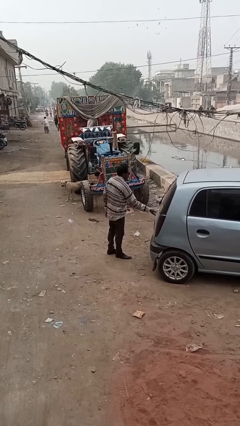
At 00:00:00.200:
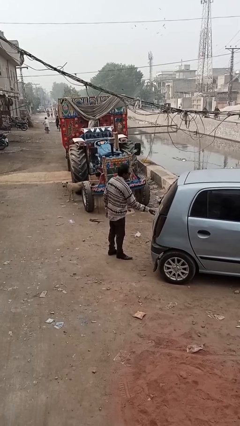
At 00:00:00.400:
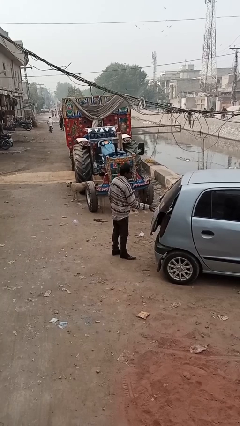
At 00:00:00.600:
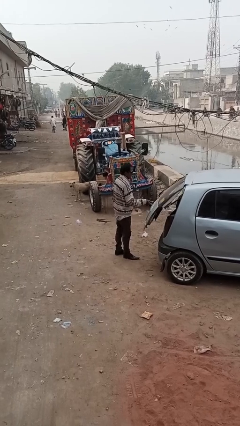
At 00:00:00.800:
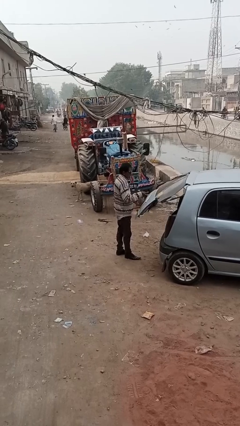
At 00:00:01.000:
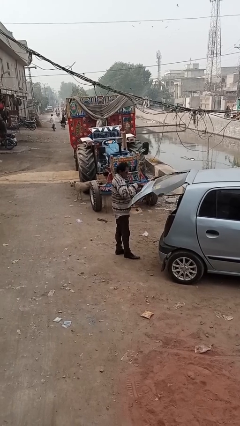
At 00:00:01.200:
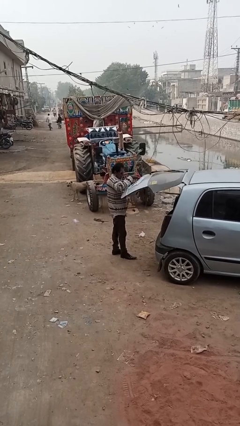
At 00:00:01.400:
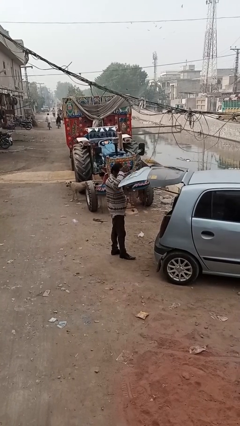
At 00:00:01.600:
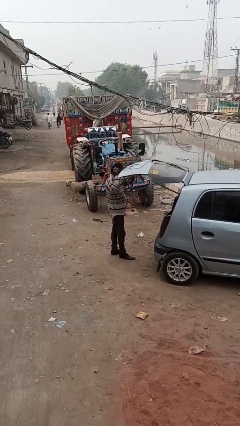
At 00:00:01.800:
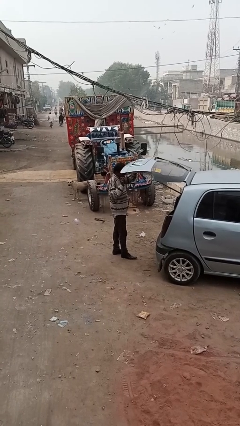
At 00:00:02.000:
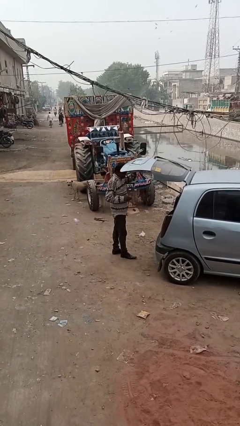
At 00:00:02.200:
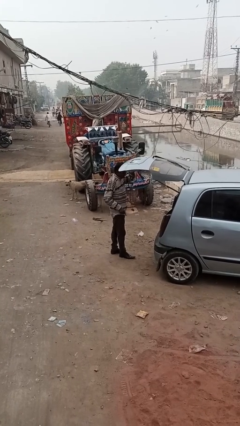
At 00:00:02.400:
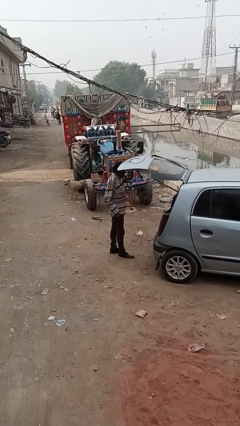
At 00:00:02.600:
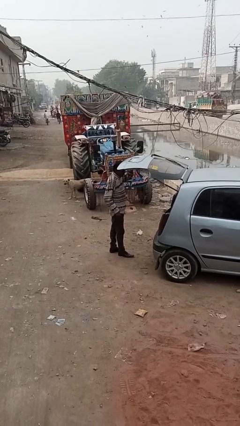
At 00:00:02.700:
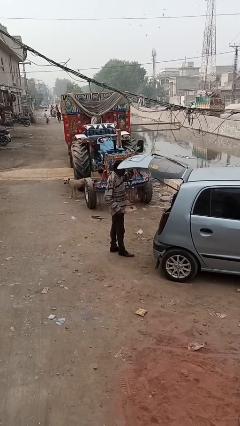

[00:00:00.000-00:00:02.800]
person opens car trunk

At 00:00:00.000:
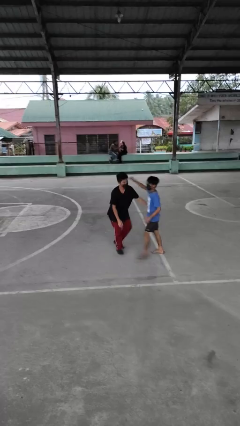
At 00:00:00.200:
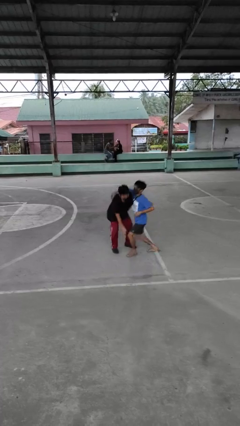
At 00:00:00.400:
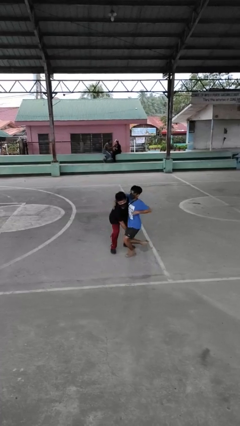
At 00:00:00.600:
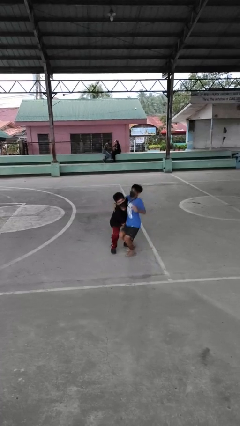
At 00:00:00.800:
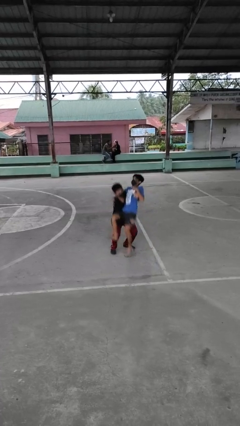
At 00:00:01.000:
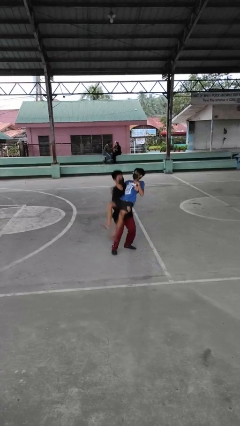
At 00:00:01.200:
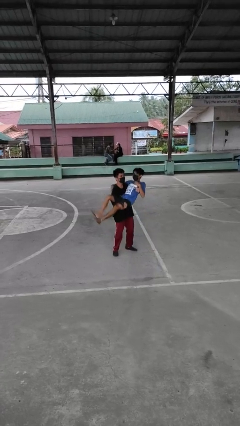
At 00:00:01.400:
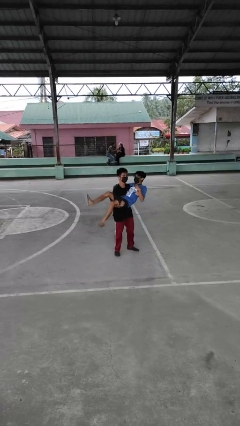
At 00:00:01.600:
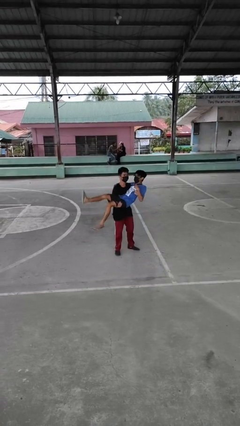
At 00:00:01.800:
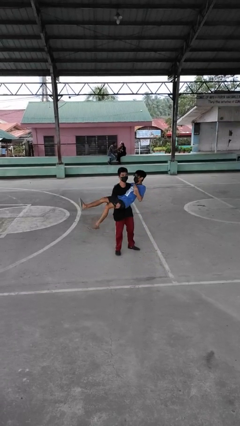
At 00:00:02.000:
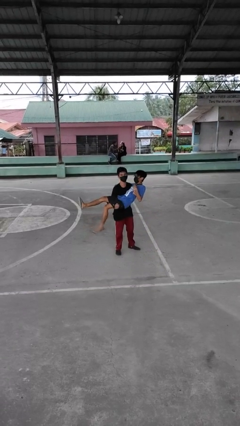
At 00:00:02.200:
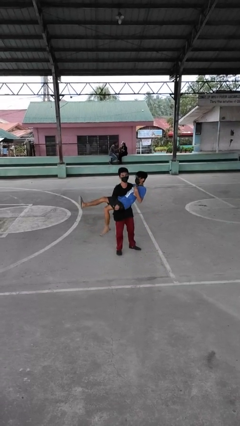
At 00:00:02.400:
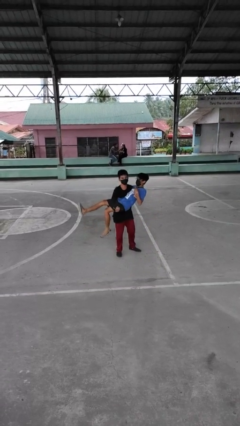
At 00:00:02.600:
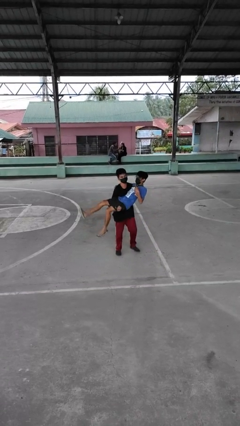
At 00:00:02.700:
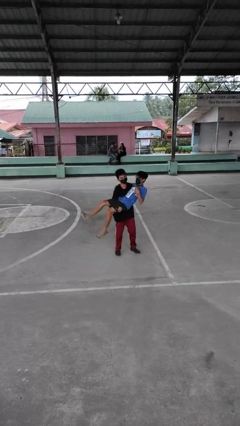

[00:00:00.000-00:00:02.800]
person picks up person

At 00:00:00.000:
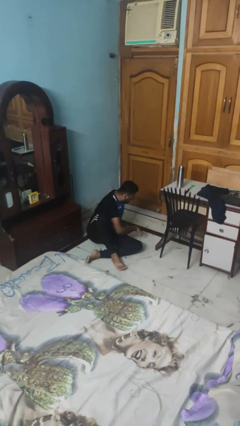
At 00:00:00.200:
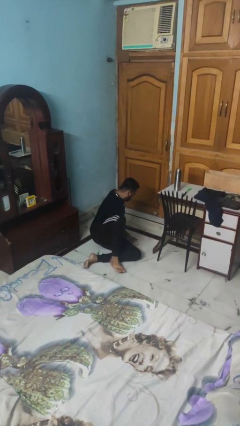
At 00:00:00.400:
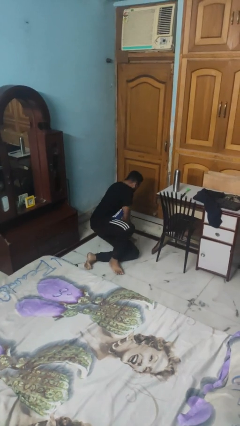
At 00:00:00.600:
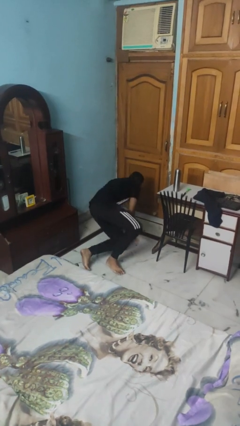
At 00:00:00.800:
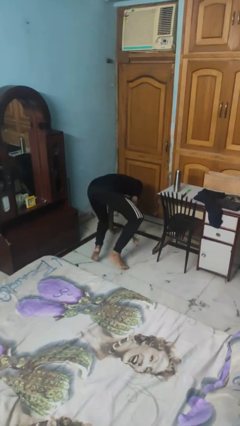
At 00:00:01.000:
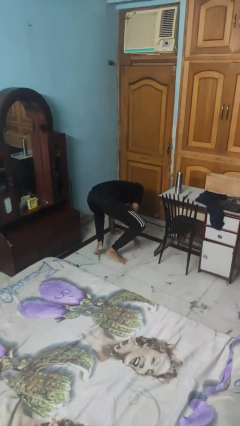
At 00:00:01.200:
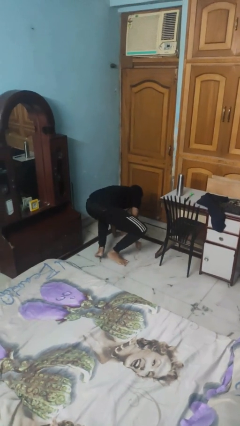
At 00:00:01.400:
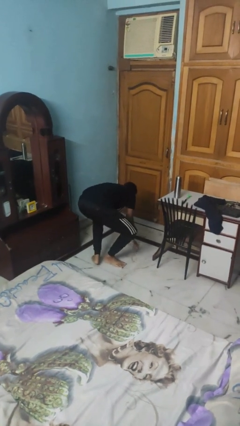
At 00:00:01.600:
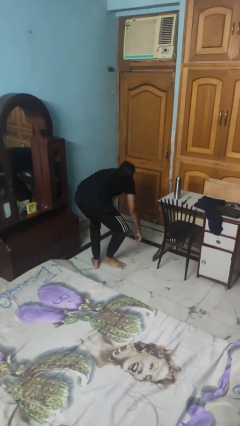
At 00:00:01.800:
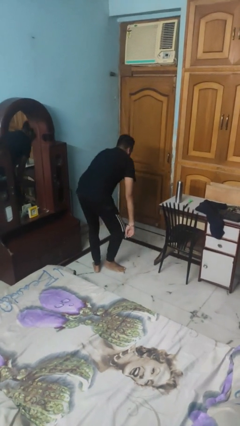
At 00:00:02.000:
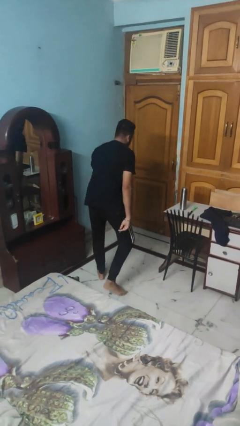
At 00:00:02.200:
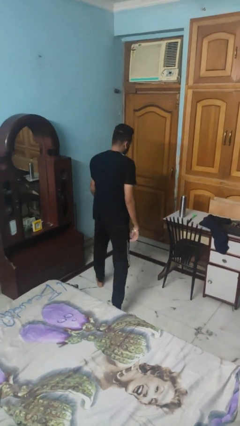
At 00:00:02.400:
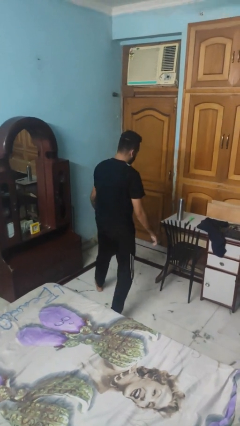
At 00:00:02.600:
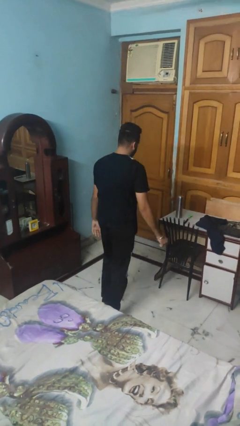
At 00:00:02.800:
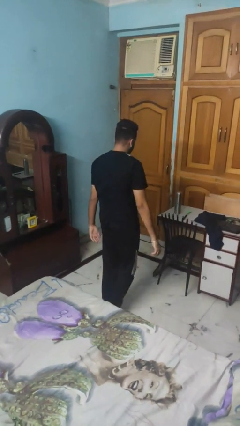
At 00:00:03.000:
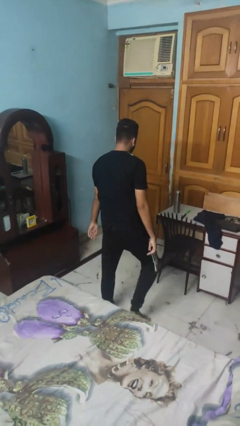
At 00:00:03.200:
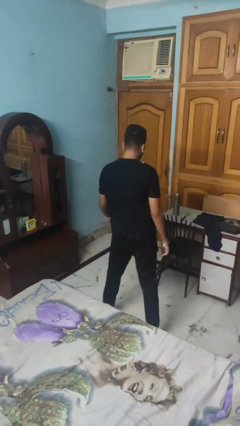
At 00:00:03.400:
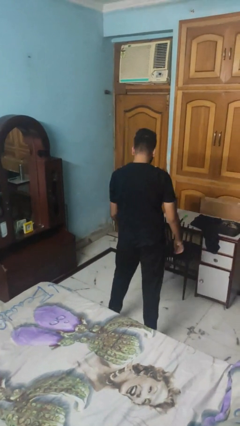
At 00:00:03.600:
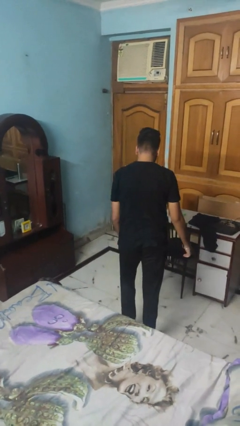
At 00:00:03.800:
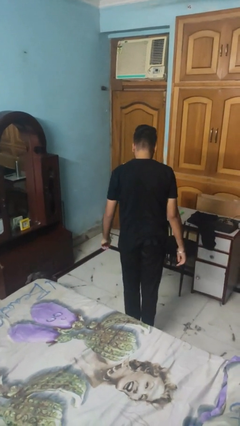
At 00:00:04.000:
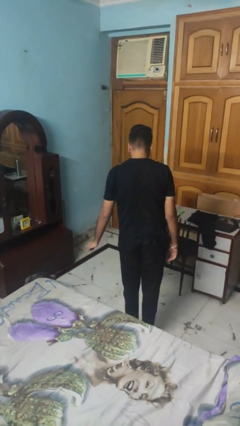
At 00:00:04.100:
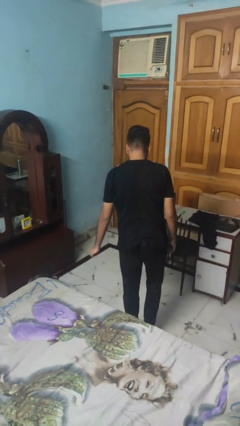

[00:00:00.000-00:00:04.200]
person stands up from floor

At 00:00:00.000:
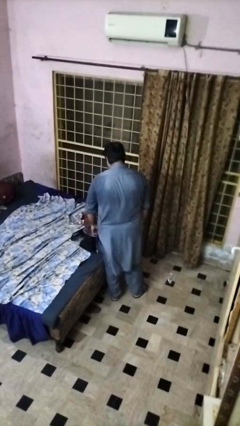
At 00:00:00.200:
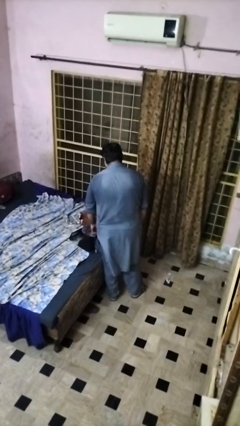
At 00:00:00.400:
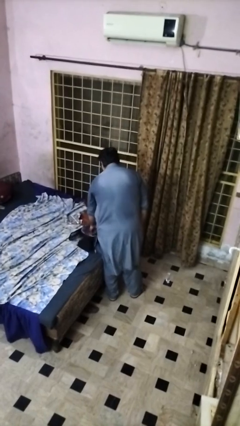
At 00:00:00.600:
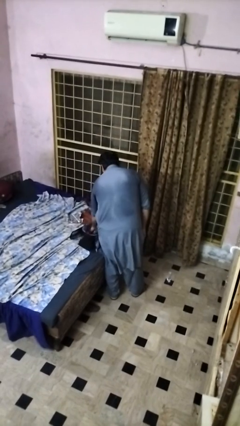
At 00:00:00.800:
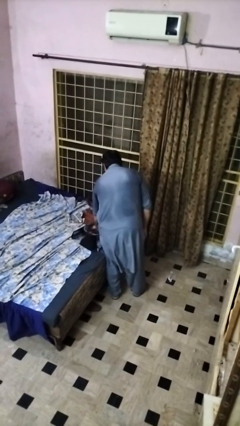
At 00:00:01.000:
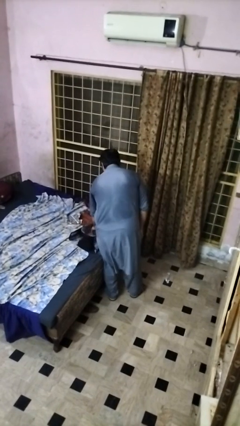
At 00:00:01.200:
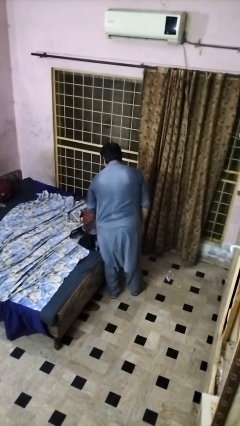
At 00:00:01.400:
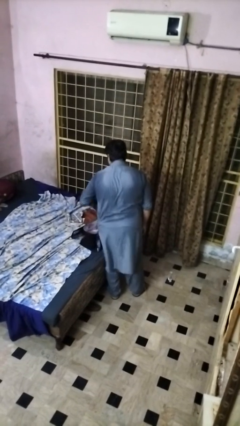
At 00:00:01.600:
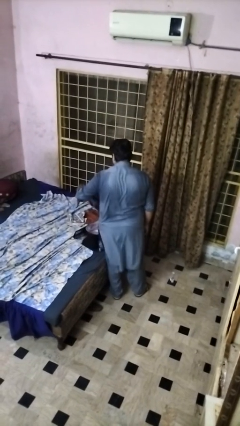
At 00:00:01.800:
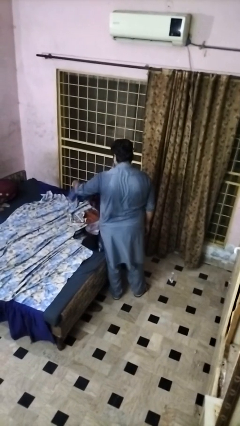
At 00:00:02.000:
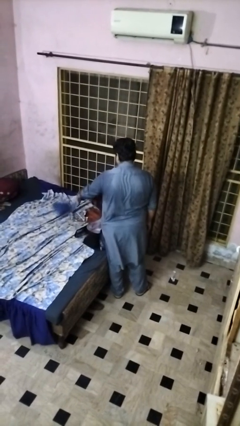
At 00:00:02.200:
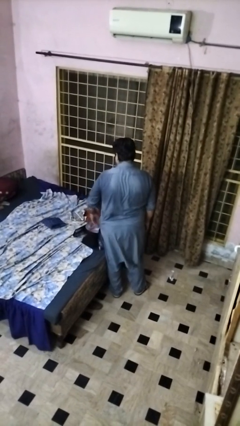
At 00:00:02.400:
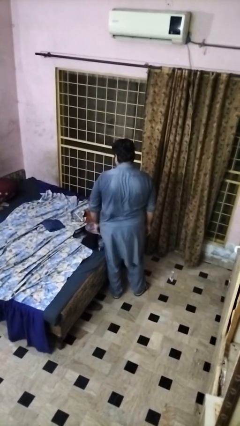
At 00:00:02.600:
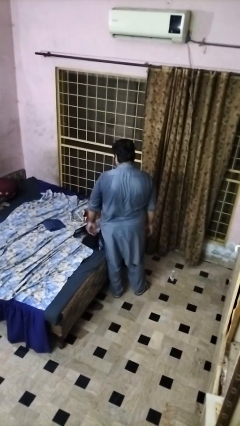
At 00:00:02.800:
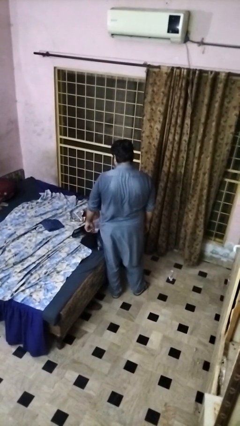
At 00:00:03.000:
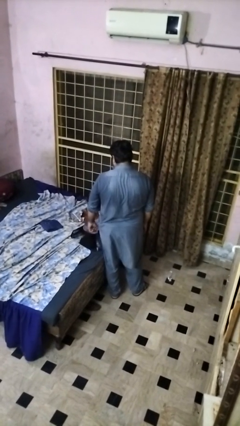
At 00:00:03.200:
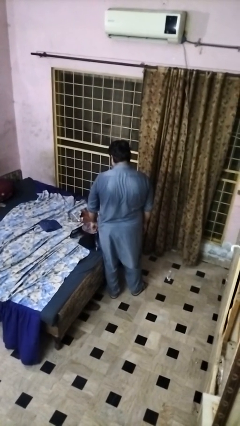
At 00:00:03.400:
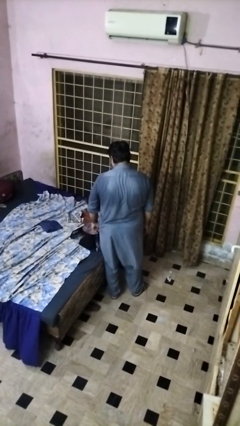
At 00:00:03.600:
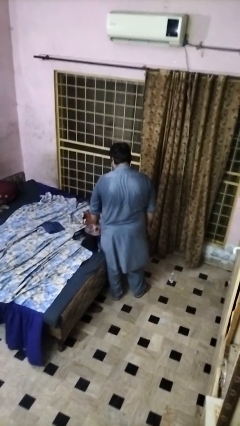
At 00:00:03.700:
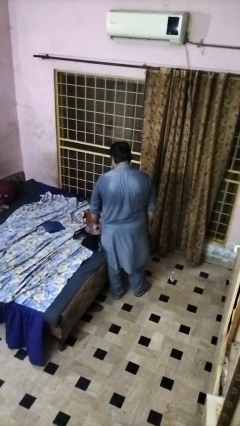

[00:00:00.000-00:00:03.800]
person unloads clothes from suitcase

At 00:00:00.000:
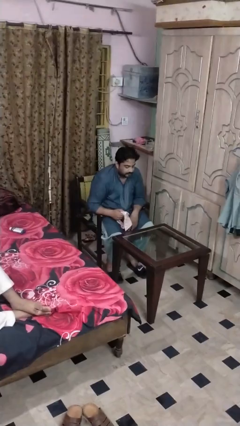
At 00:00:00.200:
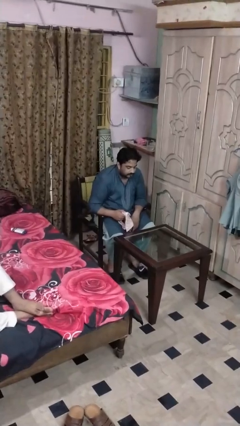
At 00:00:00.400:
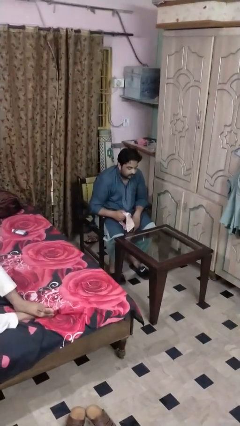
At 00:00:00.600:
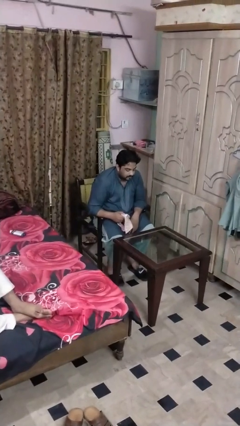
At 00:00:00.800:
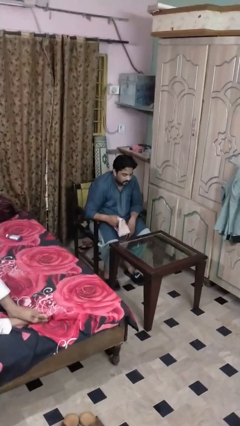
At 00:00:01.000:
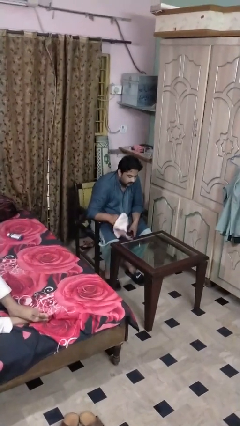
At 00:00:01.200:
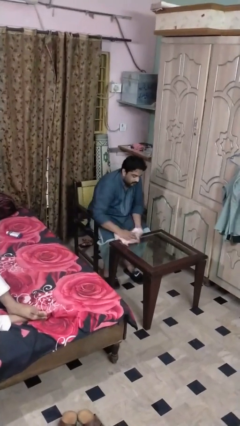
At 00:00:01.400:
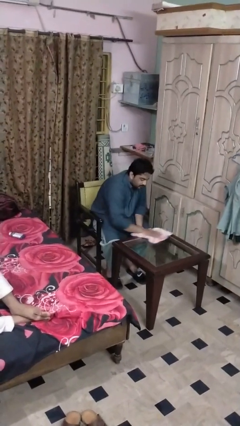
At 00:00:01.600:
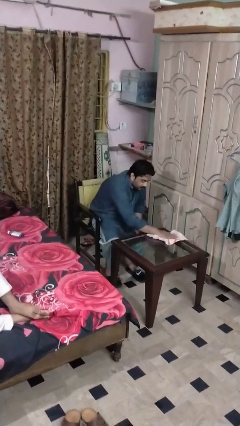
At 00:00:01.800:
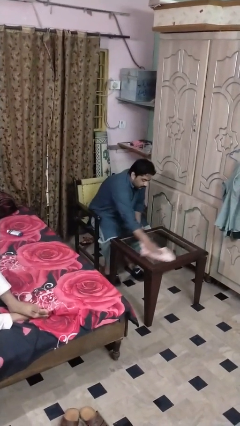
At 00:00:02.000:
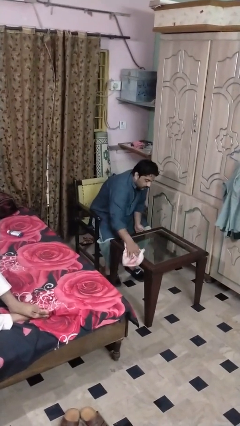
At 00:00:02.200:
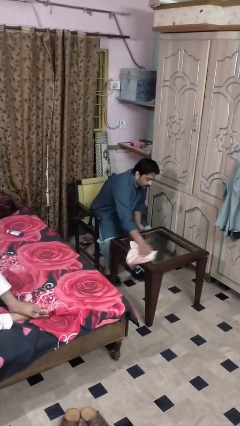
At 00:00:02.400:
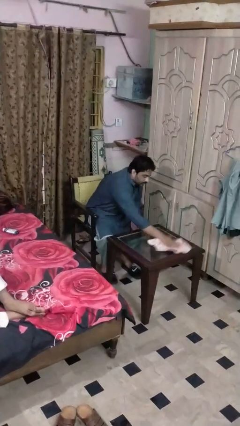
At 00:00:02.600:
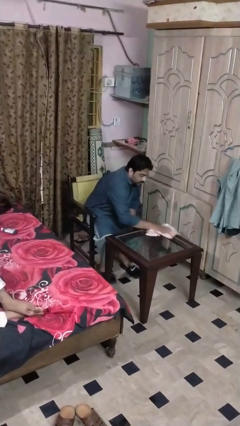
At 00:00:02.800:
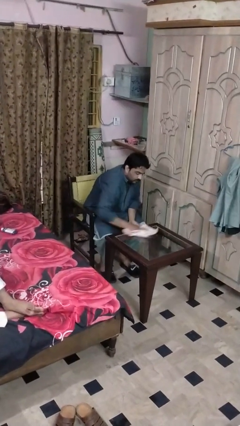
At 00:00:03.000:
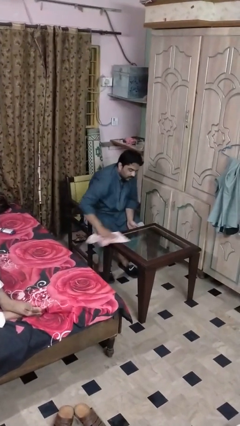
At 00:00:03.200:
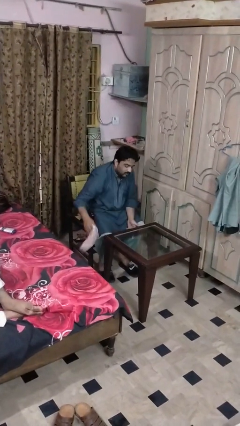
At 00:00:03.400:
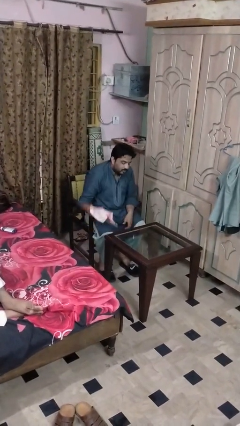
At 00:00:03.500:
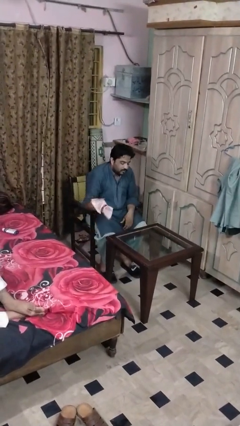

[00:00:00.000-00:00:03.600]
person cleans table with rag

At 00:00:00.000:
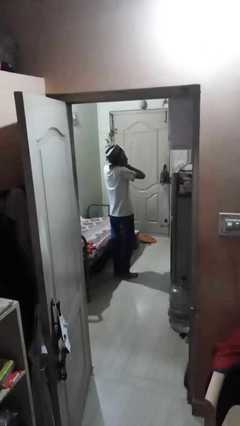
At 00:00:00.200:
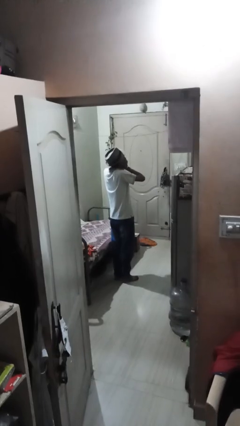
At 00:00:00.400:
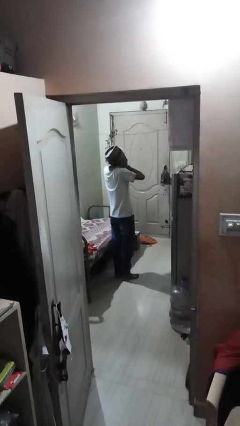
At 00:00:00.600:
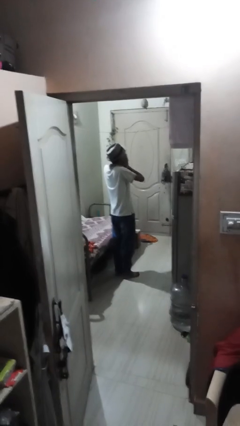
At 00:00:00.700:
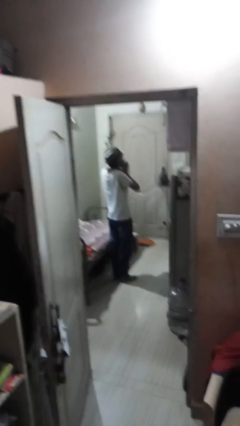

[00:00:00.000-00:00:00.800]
person covers face with hands
